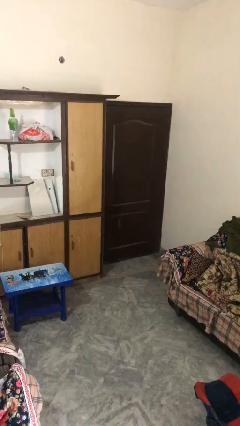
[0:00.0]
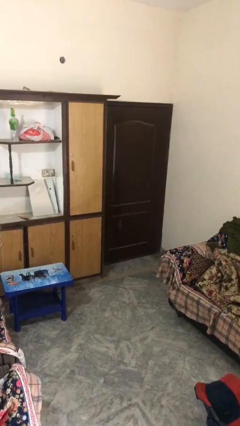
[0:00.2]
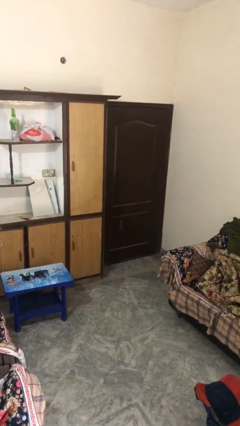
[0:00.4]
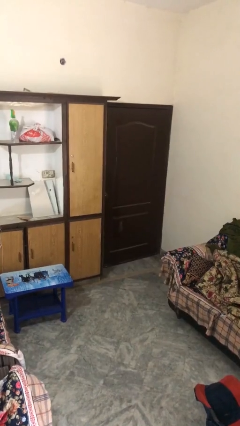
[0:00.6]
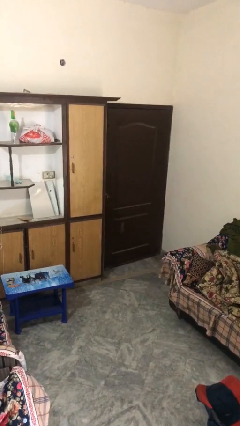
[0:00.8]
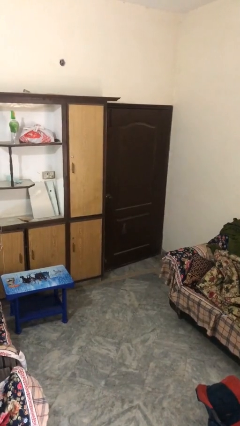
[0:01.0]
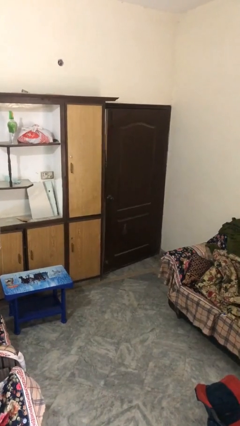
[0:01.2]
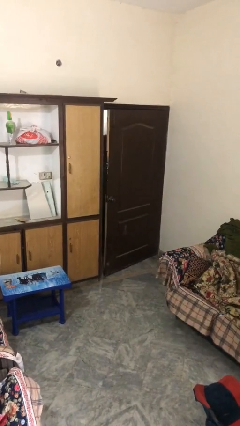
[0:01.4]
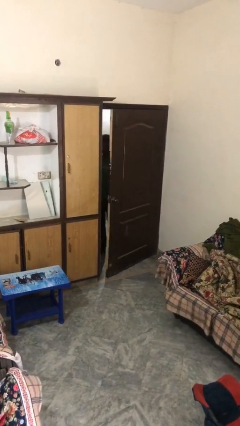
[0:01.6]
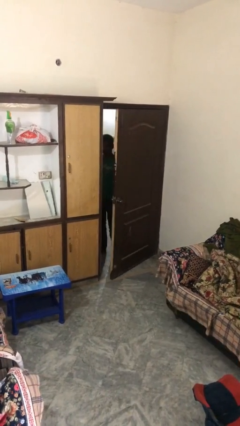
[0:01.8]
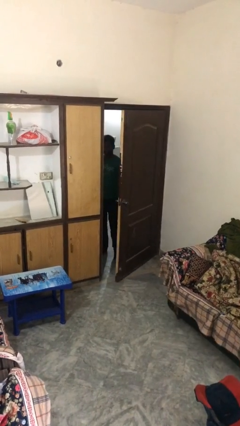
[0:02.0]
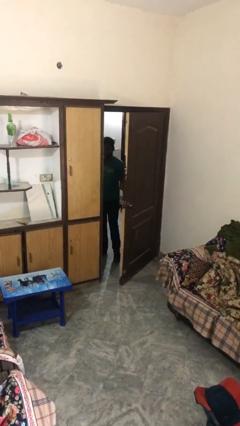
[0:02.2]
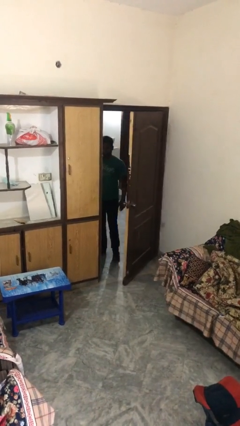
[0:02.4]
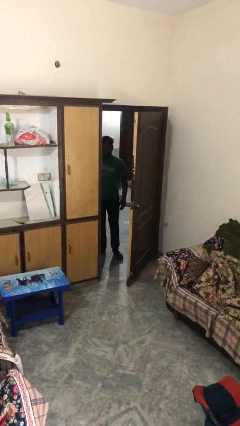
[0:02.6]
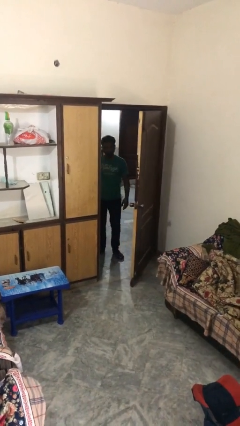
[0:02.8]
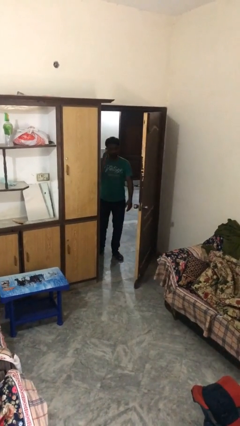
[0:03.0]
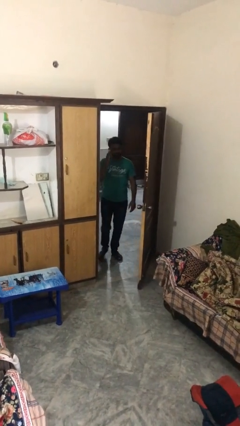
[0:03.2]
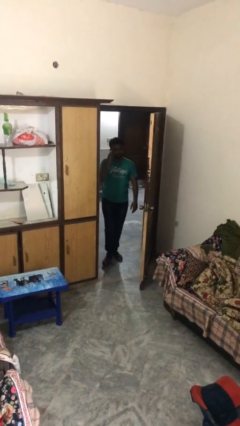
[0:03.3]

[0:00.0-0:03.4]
person opens facility door

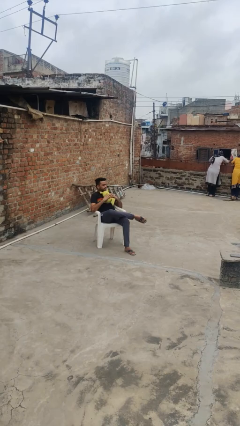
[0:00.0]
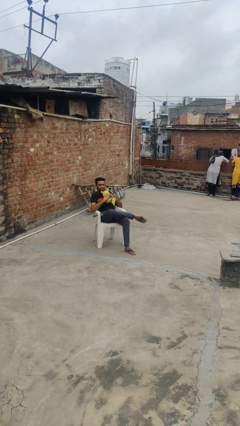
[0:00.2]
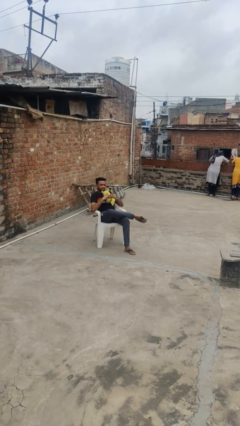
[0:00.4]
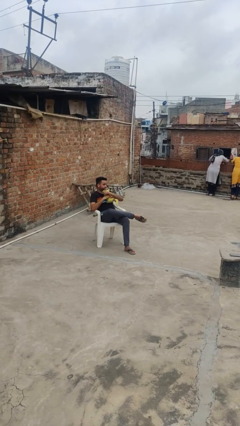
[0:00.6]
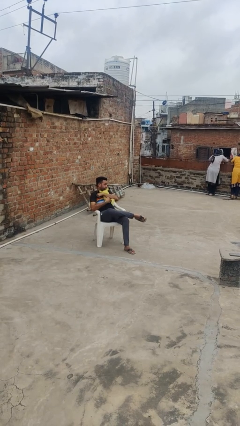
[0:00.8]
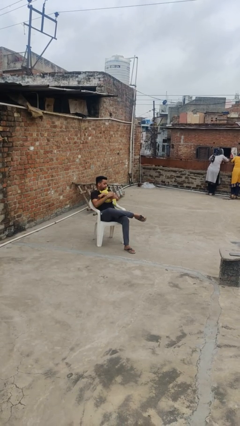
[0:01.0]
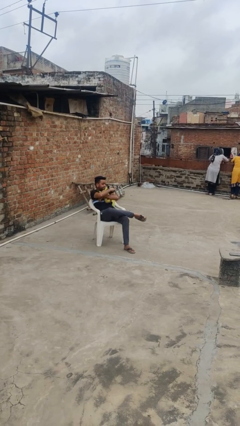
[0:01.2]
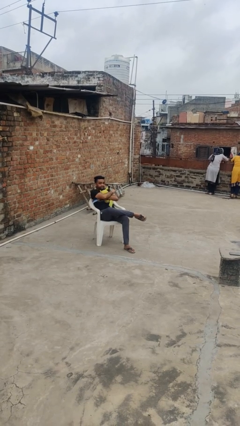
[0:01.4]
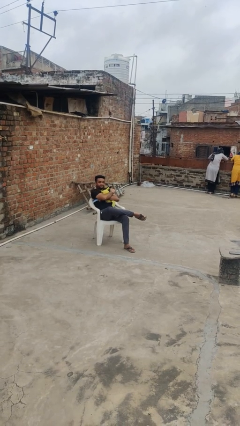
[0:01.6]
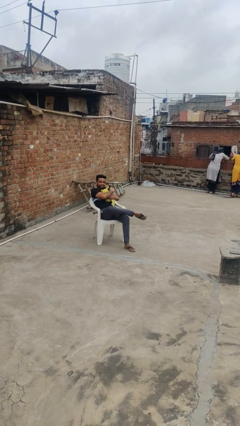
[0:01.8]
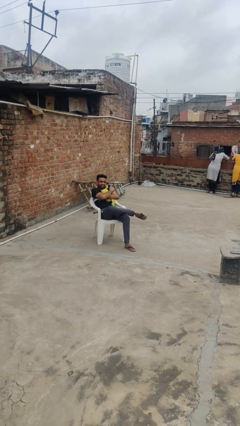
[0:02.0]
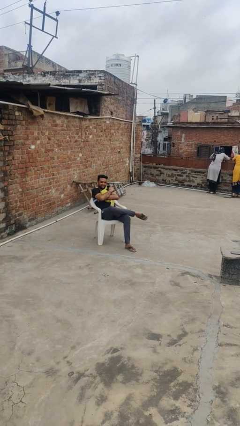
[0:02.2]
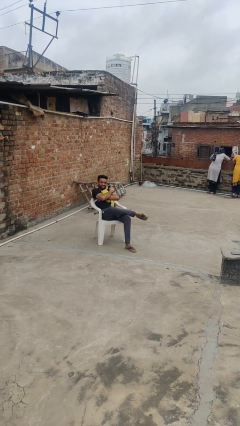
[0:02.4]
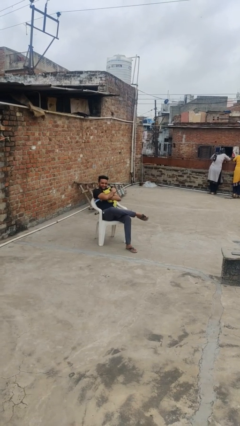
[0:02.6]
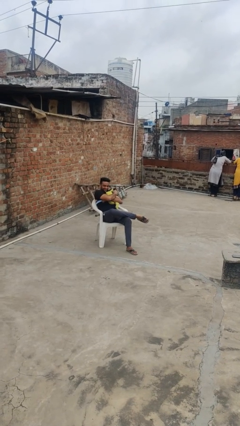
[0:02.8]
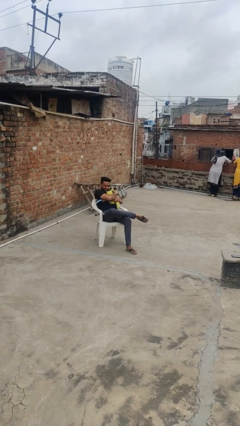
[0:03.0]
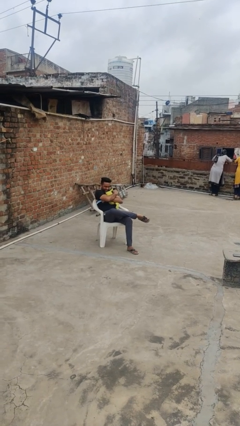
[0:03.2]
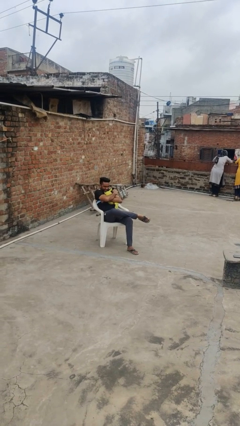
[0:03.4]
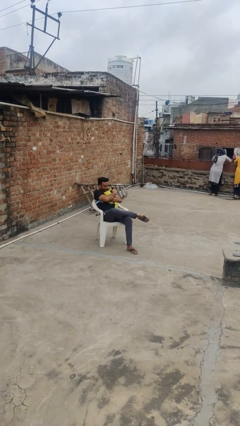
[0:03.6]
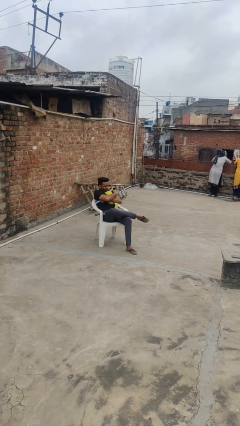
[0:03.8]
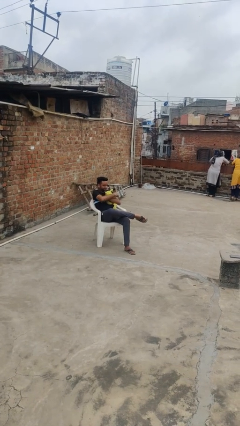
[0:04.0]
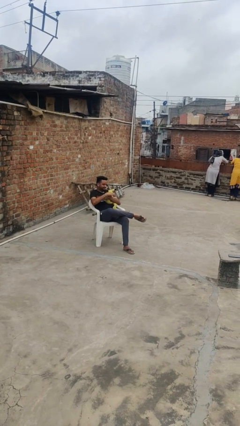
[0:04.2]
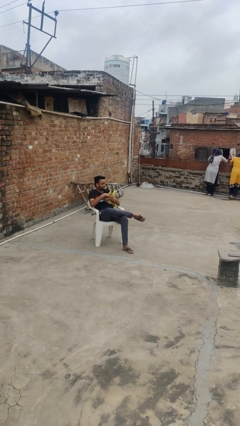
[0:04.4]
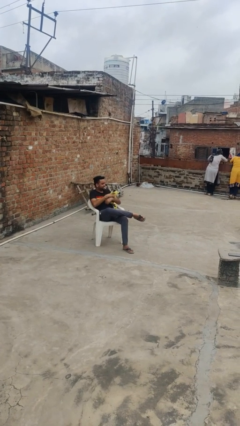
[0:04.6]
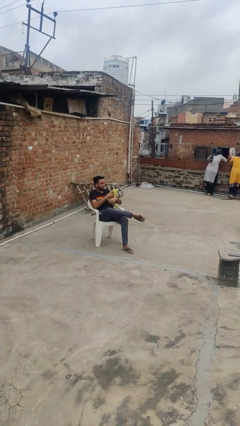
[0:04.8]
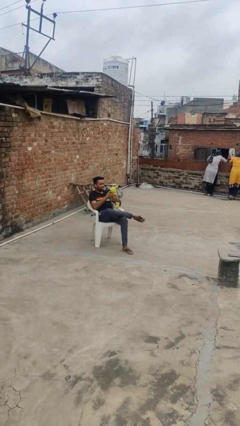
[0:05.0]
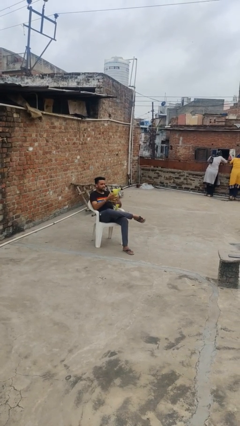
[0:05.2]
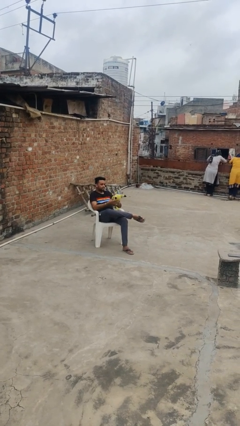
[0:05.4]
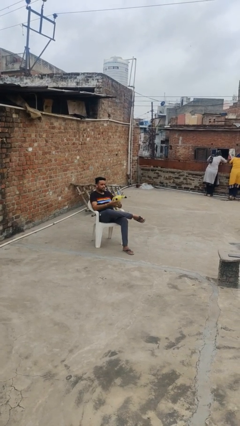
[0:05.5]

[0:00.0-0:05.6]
person hugs stuffed animal

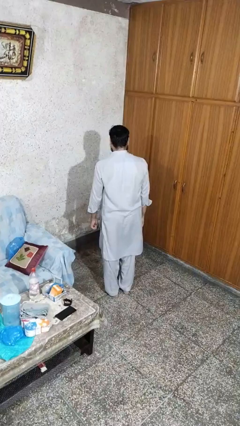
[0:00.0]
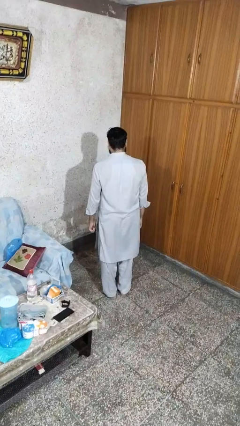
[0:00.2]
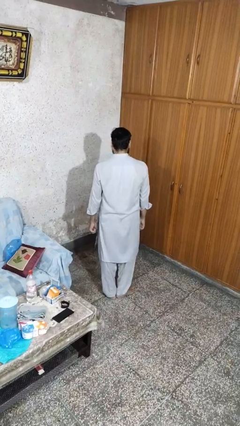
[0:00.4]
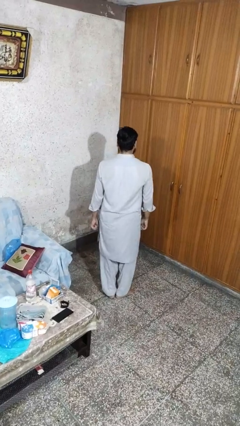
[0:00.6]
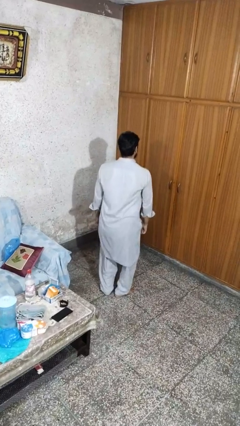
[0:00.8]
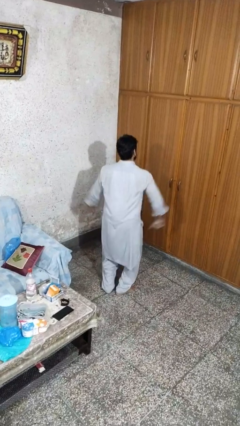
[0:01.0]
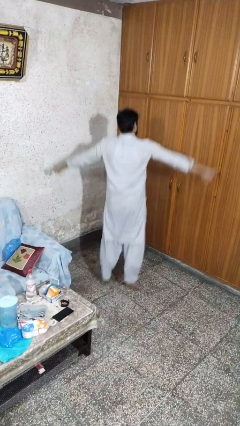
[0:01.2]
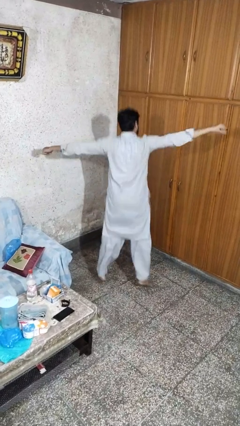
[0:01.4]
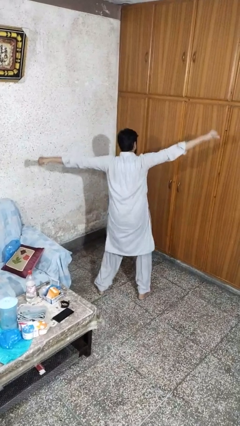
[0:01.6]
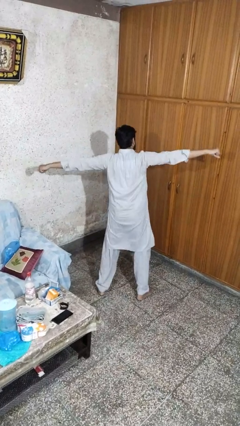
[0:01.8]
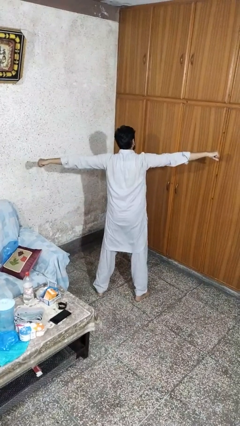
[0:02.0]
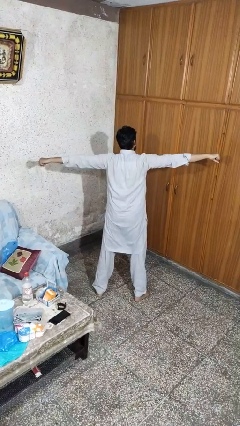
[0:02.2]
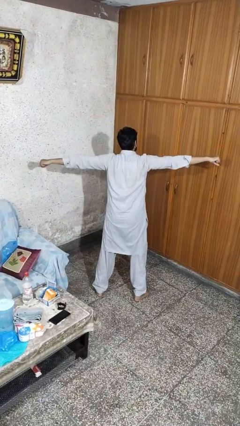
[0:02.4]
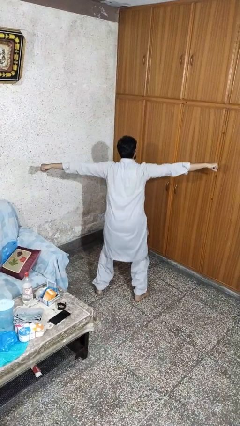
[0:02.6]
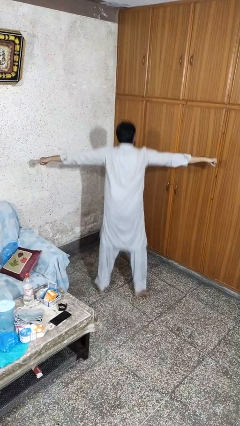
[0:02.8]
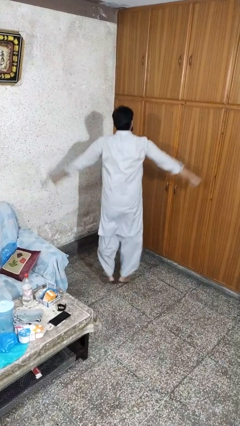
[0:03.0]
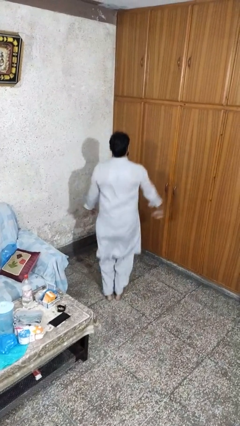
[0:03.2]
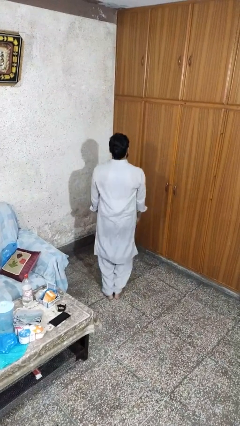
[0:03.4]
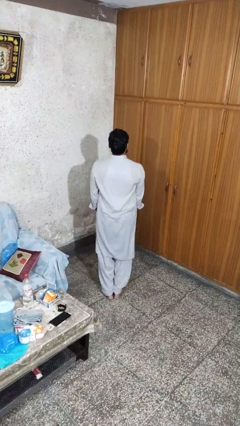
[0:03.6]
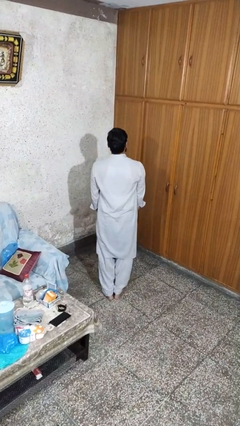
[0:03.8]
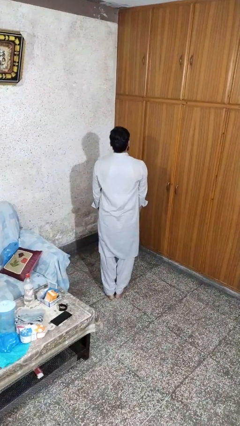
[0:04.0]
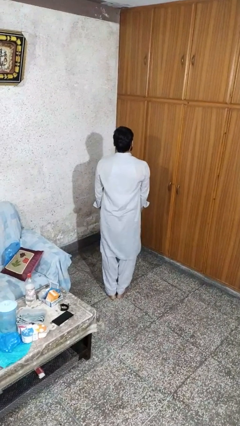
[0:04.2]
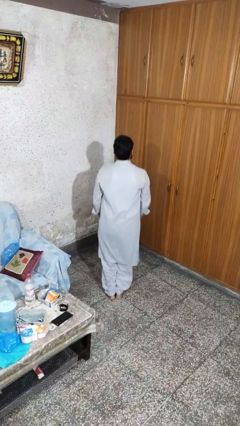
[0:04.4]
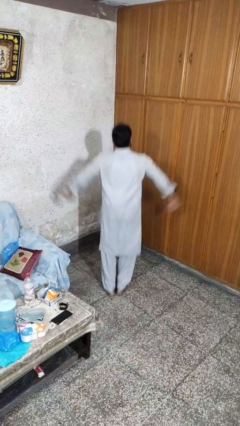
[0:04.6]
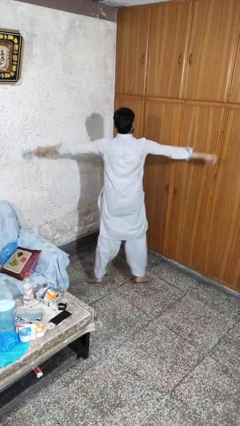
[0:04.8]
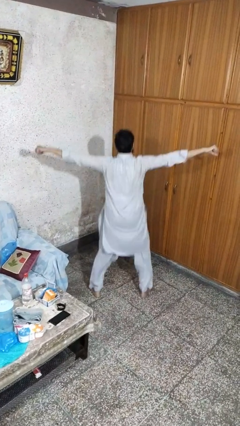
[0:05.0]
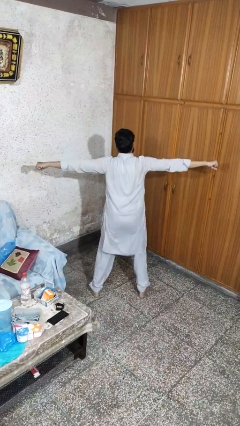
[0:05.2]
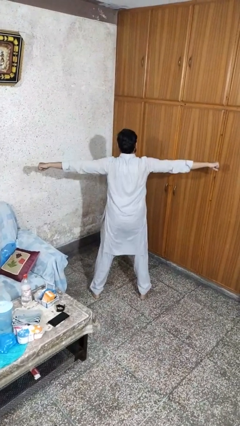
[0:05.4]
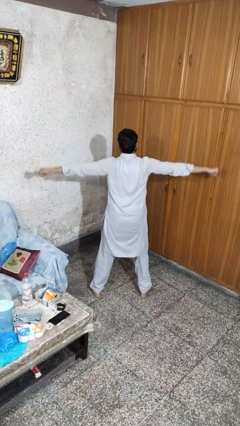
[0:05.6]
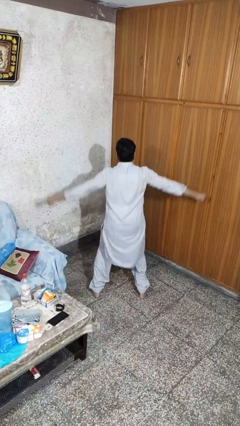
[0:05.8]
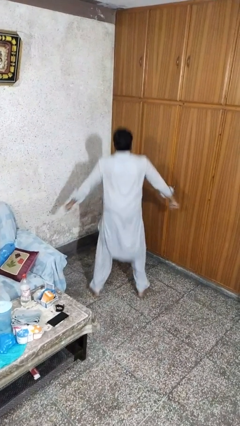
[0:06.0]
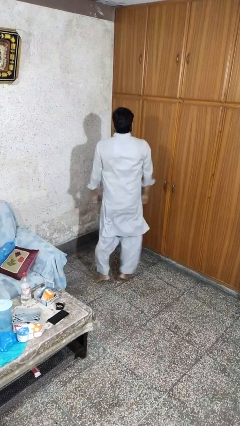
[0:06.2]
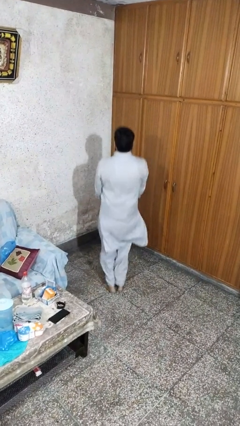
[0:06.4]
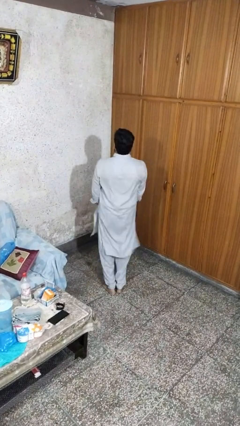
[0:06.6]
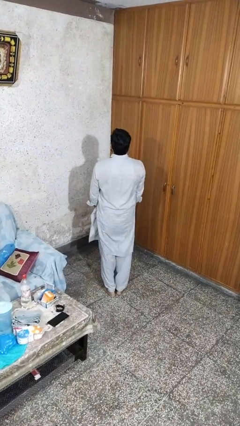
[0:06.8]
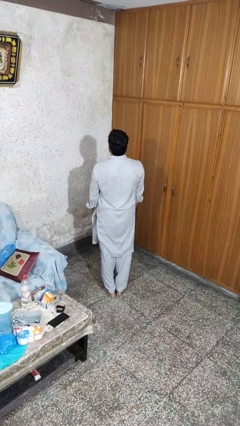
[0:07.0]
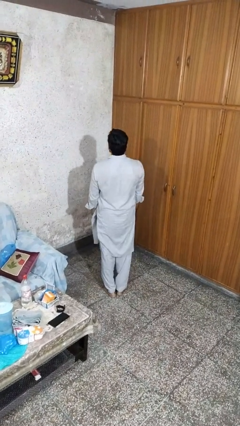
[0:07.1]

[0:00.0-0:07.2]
person exercises with jumping jacks

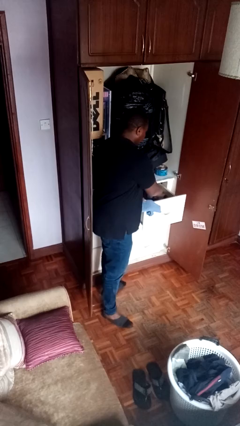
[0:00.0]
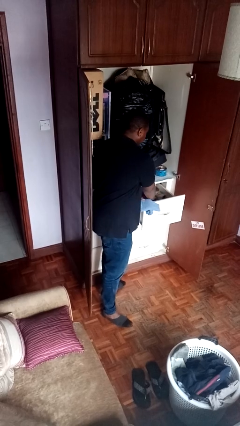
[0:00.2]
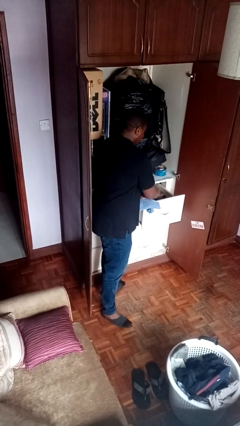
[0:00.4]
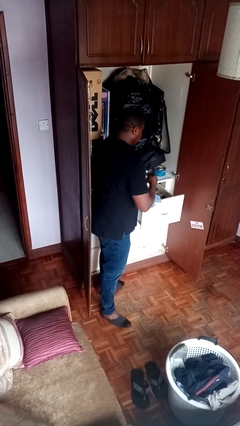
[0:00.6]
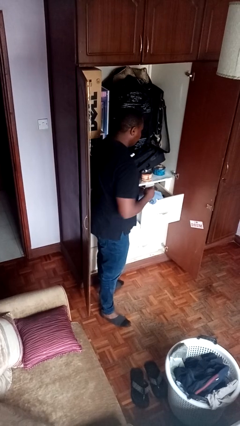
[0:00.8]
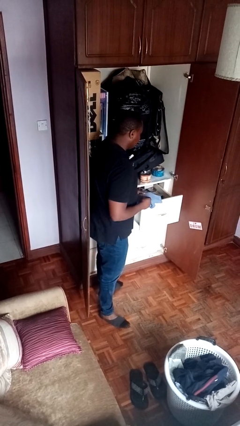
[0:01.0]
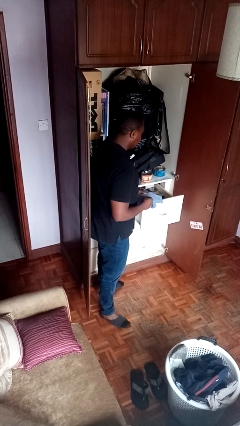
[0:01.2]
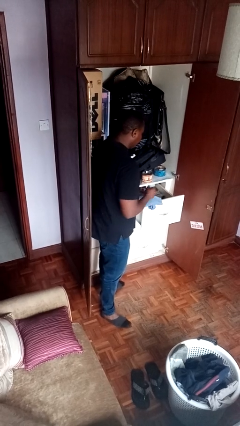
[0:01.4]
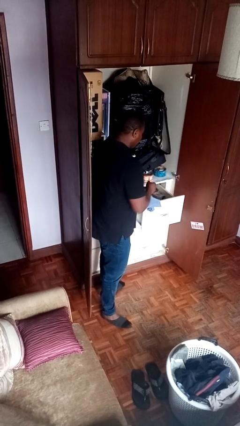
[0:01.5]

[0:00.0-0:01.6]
person puts clothes into dresser
